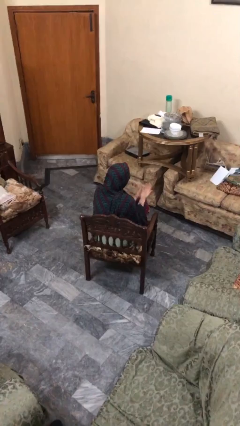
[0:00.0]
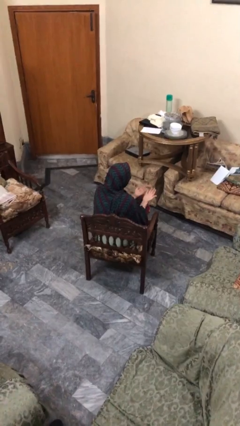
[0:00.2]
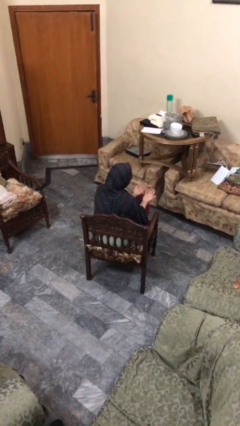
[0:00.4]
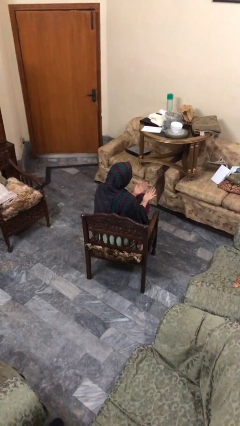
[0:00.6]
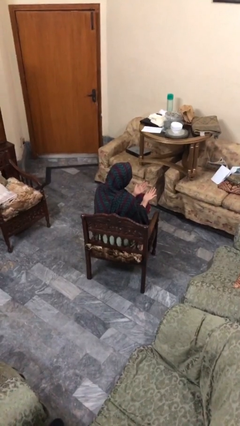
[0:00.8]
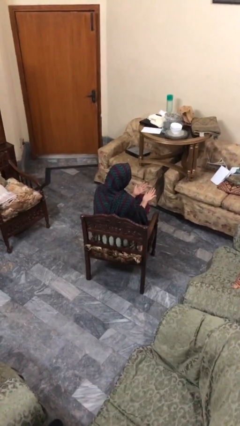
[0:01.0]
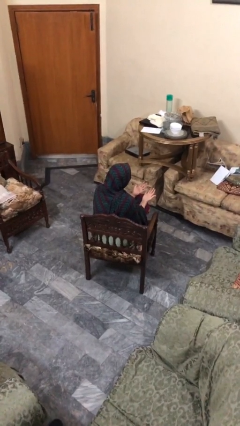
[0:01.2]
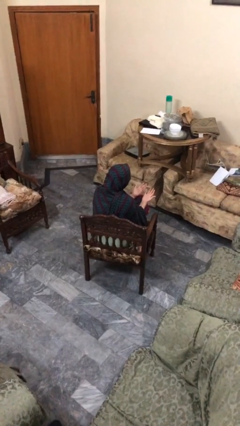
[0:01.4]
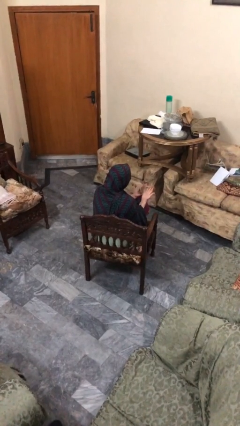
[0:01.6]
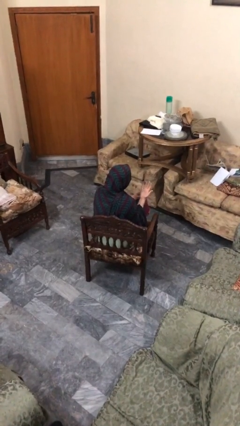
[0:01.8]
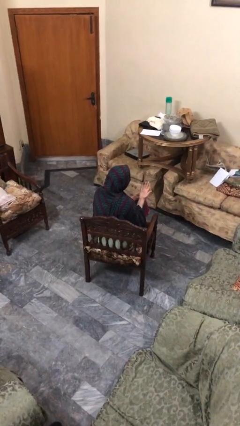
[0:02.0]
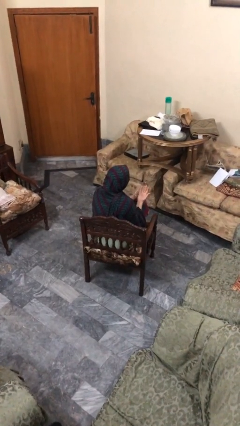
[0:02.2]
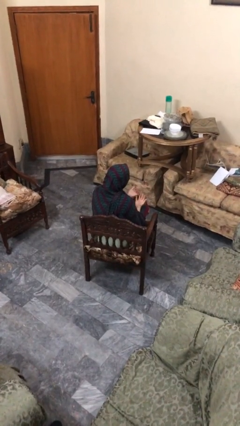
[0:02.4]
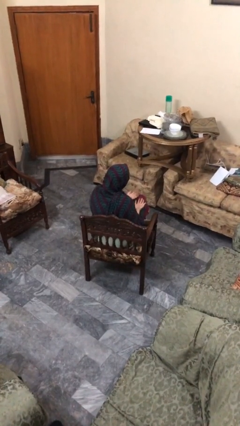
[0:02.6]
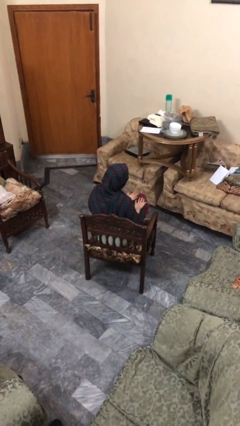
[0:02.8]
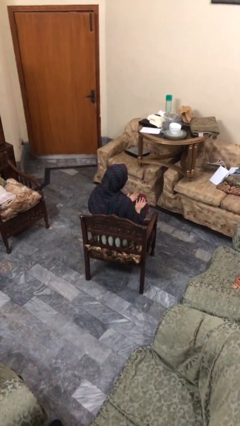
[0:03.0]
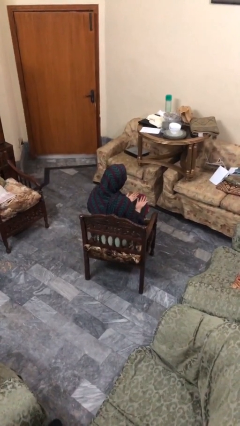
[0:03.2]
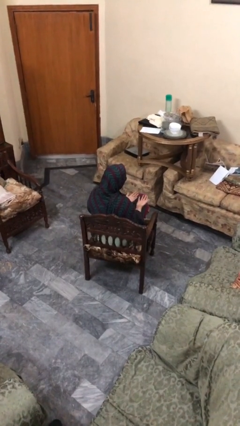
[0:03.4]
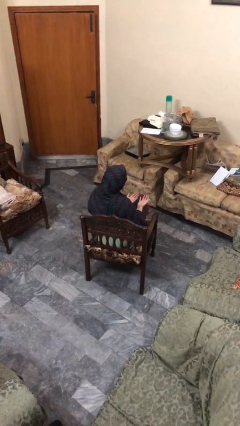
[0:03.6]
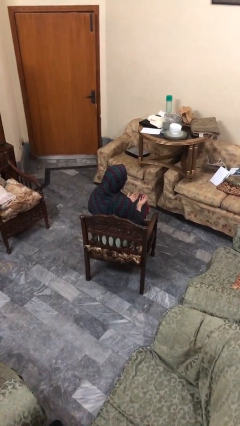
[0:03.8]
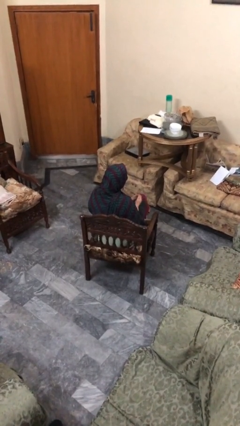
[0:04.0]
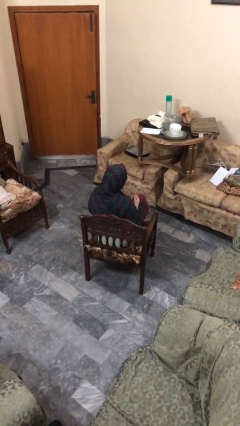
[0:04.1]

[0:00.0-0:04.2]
person looks at hands in lap

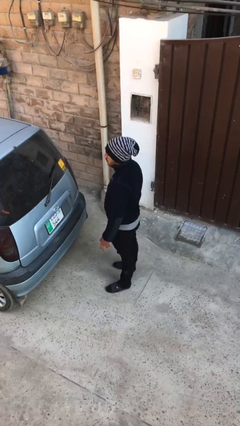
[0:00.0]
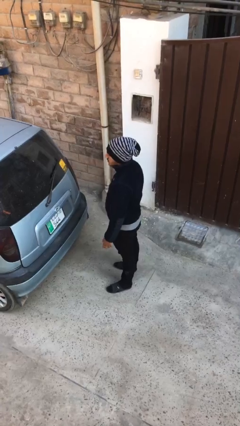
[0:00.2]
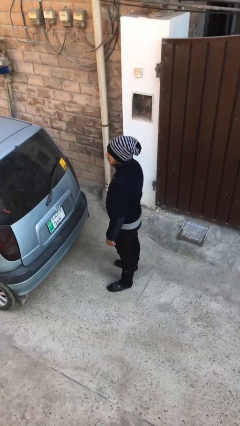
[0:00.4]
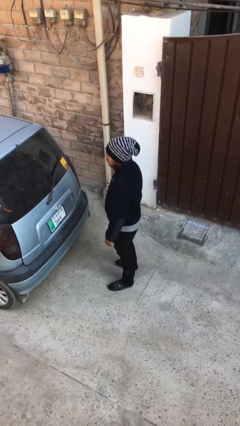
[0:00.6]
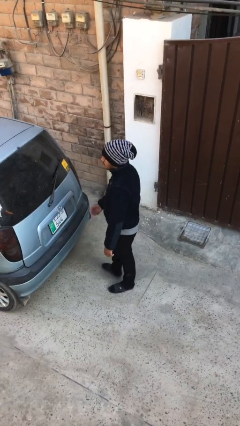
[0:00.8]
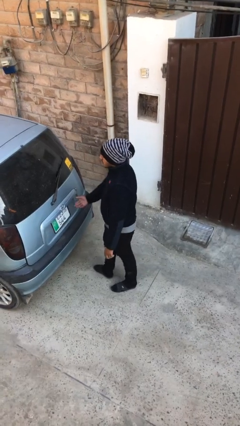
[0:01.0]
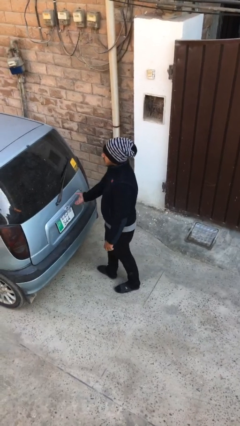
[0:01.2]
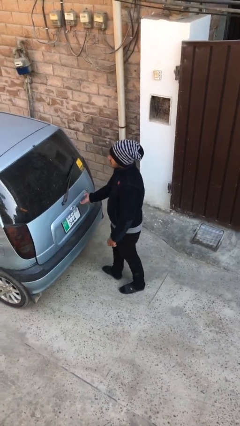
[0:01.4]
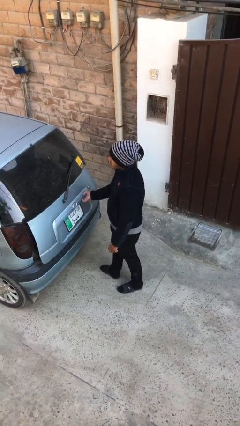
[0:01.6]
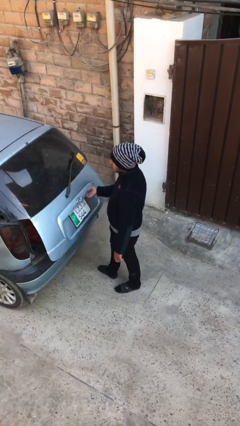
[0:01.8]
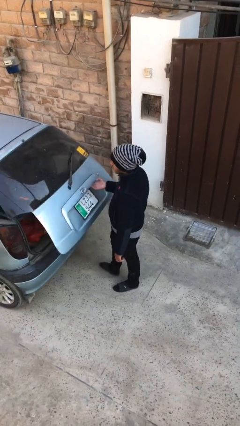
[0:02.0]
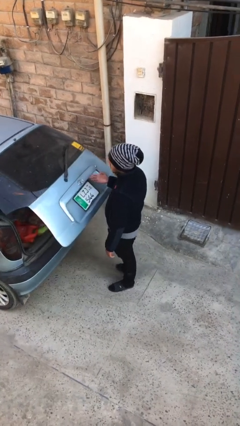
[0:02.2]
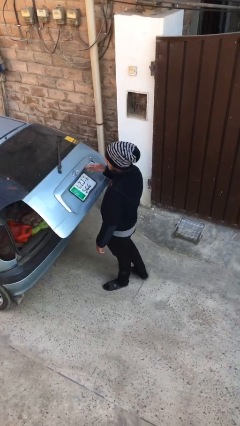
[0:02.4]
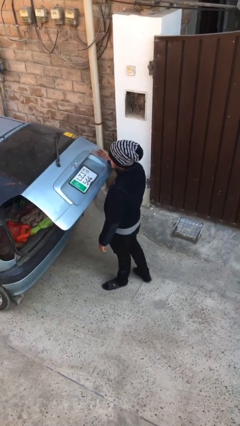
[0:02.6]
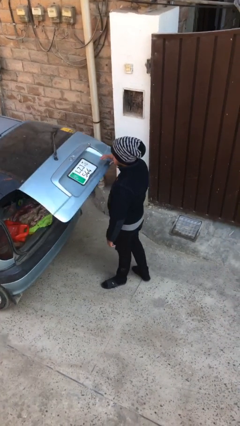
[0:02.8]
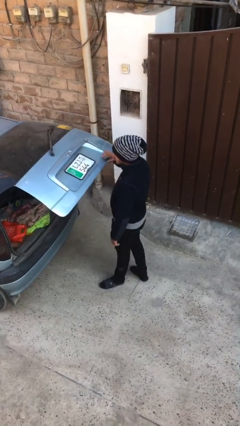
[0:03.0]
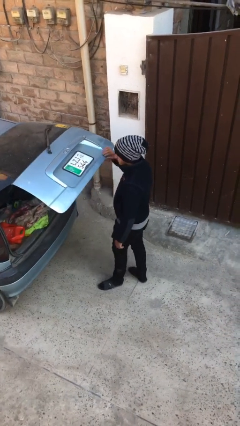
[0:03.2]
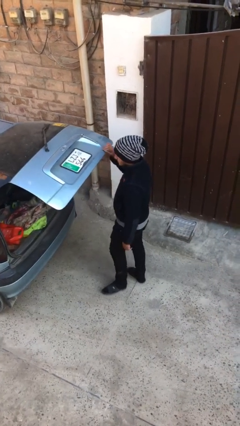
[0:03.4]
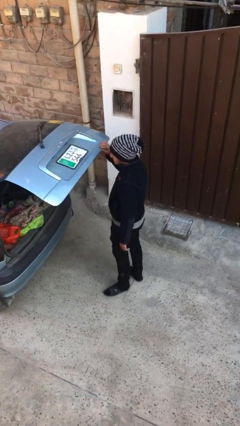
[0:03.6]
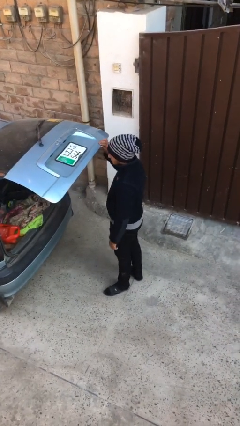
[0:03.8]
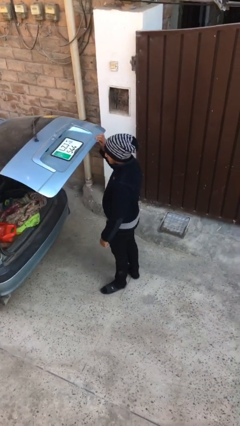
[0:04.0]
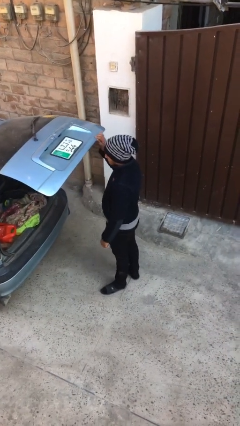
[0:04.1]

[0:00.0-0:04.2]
person opens car trunk

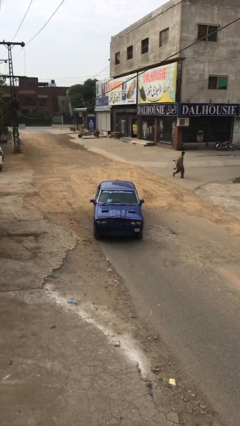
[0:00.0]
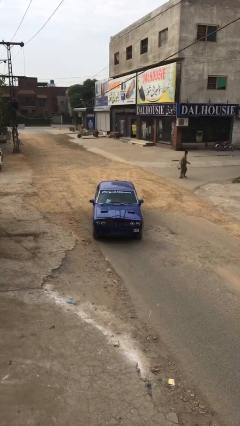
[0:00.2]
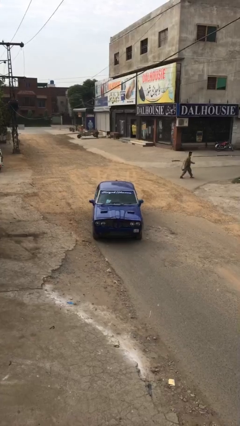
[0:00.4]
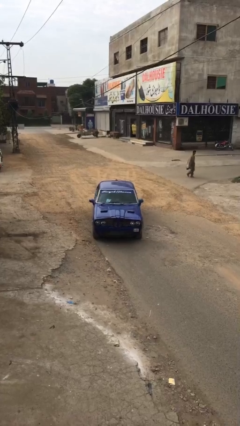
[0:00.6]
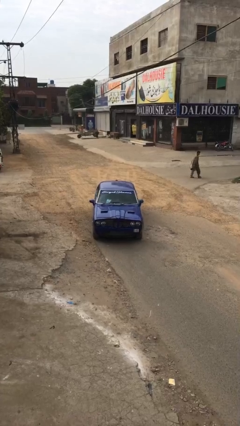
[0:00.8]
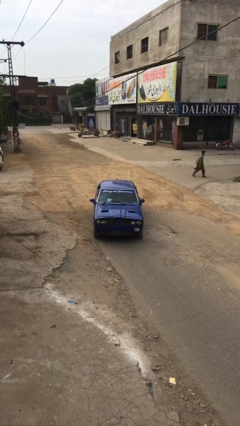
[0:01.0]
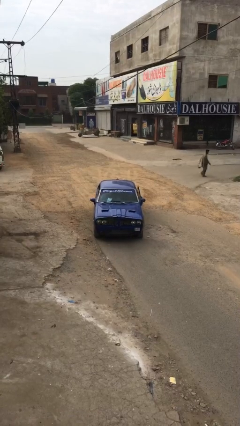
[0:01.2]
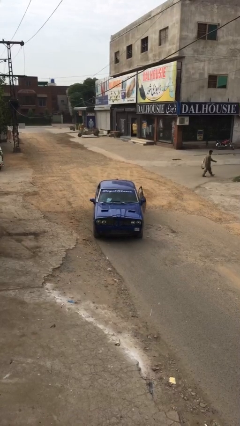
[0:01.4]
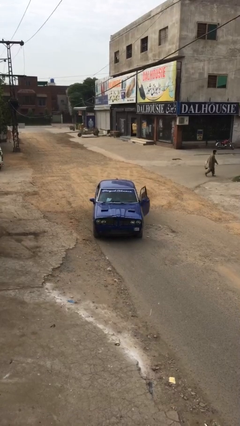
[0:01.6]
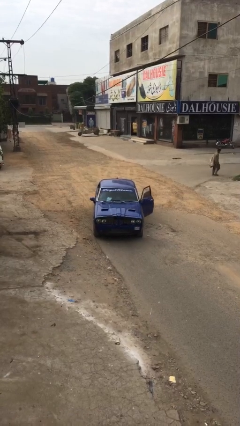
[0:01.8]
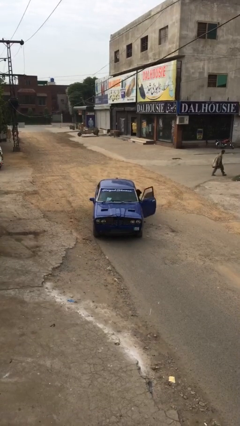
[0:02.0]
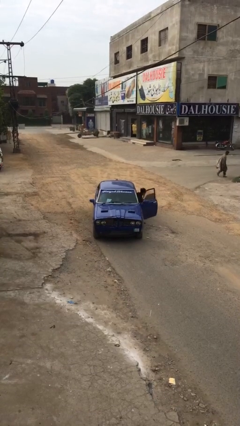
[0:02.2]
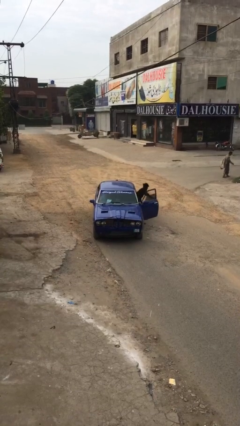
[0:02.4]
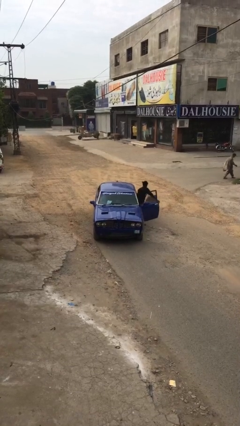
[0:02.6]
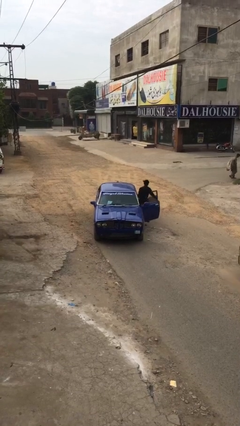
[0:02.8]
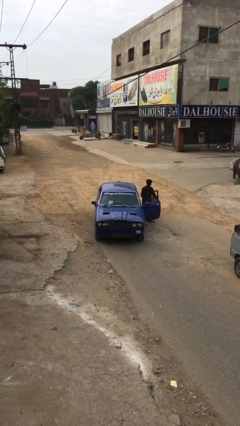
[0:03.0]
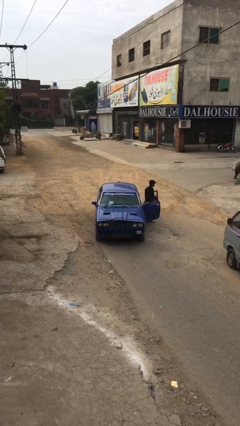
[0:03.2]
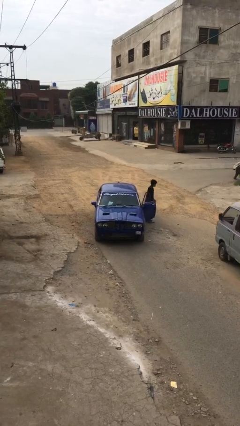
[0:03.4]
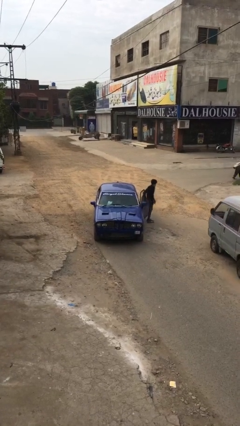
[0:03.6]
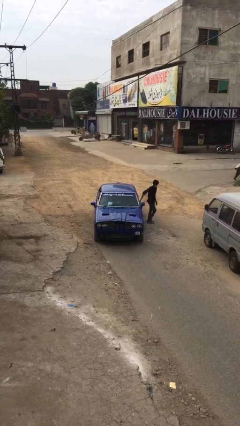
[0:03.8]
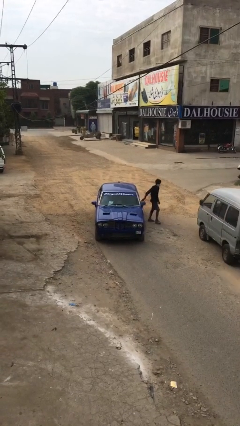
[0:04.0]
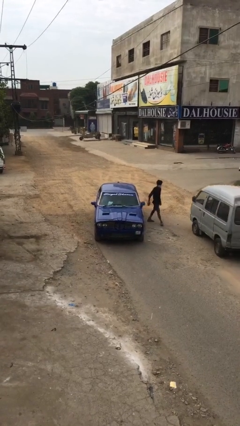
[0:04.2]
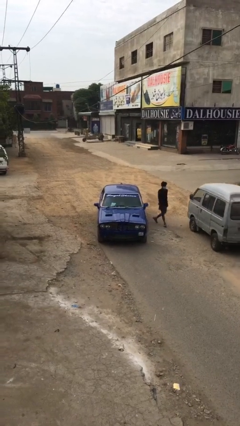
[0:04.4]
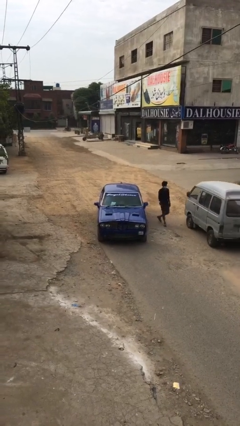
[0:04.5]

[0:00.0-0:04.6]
car drops off person

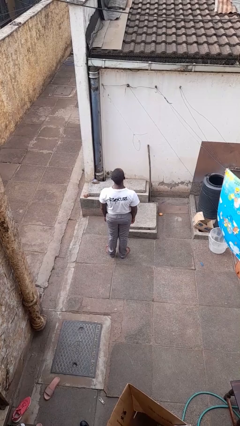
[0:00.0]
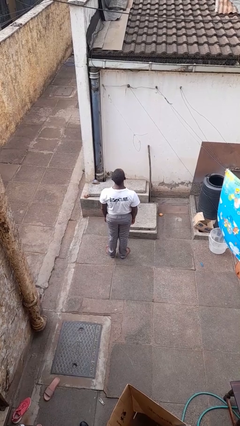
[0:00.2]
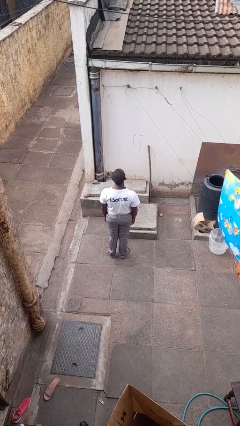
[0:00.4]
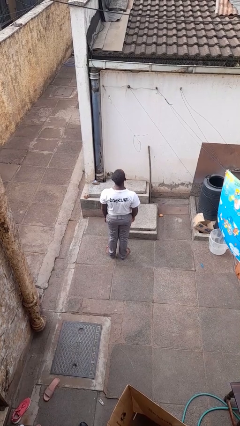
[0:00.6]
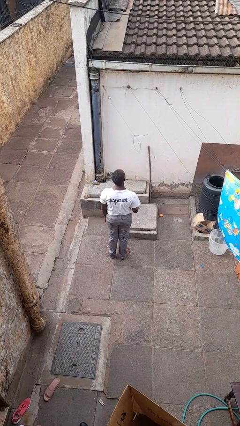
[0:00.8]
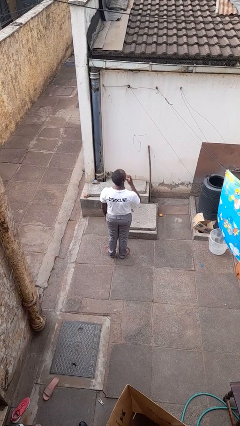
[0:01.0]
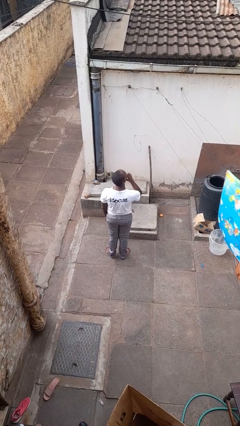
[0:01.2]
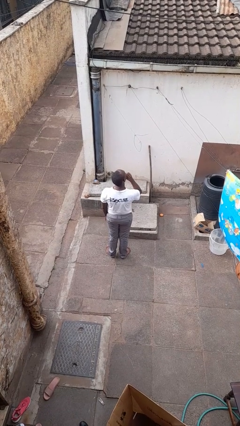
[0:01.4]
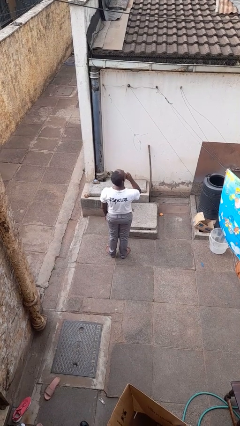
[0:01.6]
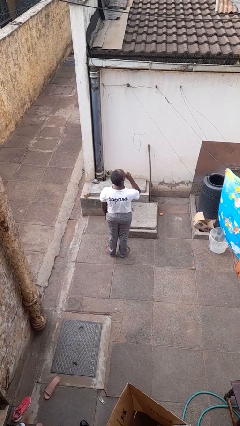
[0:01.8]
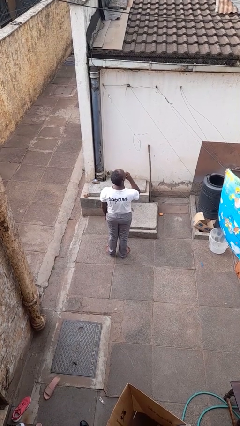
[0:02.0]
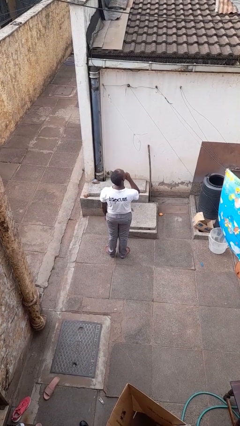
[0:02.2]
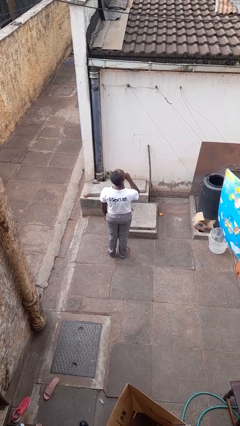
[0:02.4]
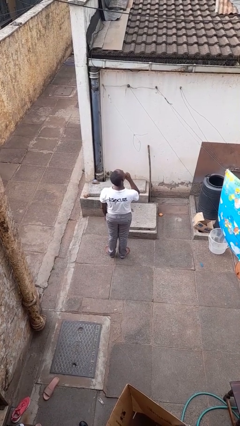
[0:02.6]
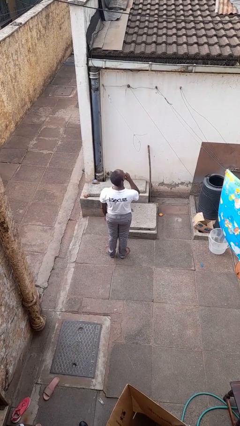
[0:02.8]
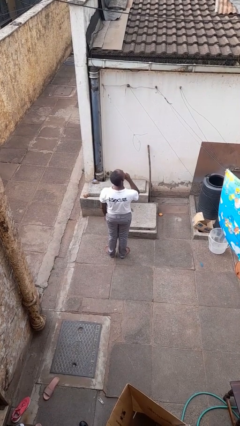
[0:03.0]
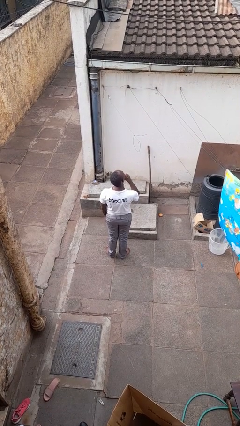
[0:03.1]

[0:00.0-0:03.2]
person strokes chin

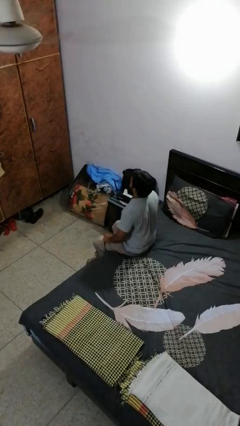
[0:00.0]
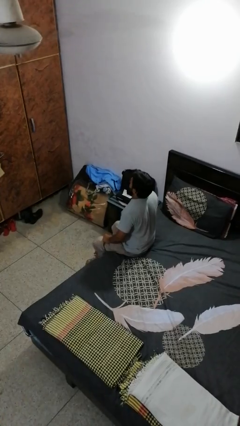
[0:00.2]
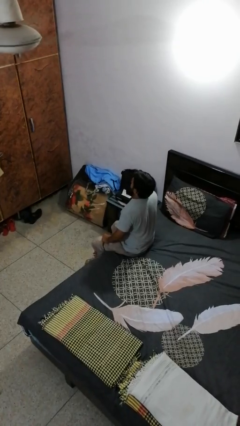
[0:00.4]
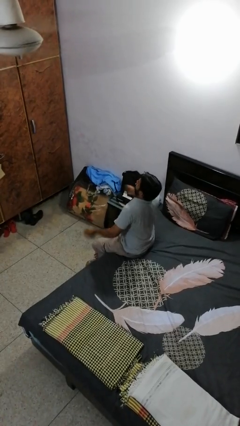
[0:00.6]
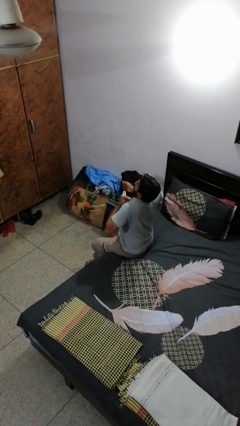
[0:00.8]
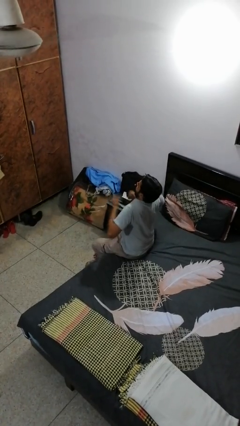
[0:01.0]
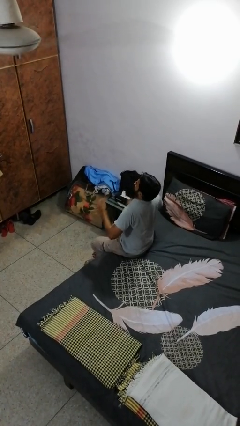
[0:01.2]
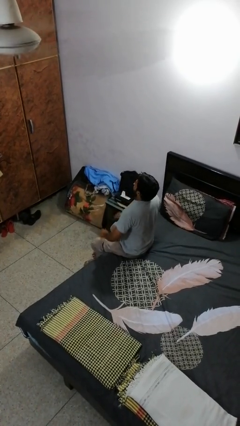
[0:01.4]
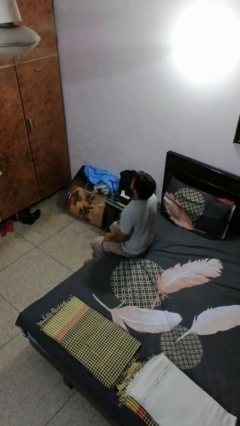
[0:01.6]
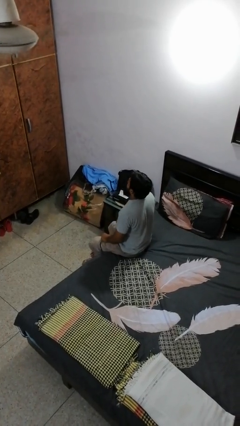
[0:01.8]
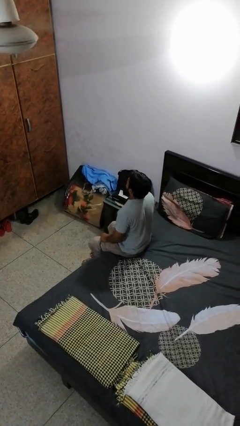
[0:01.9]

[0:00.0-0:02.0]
person drums on chest
